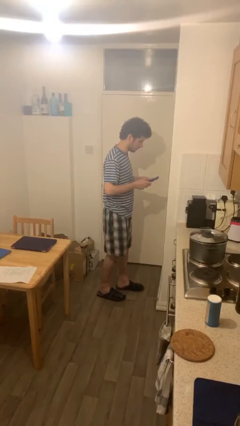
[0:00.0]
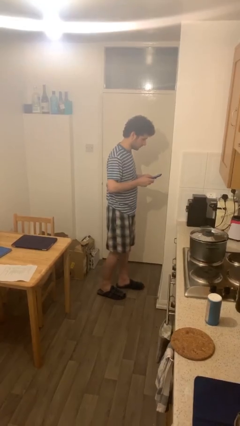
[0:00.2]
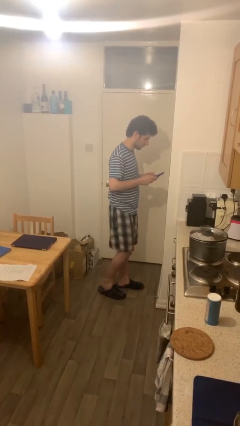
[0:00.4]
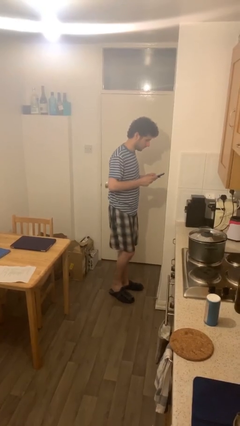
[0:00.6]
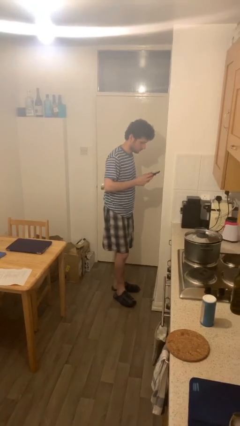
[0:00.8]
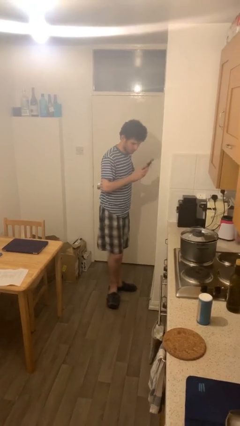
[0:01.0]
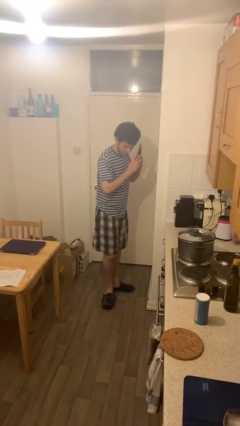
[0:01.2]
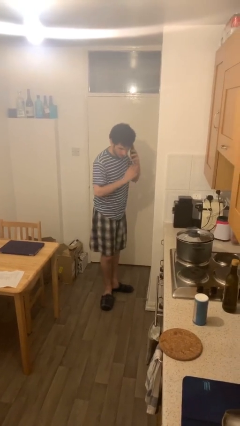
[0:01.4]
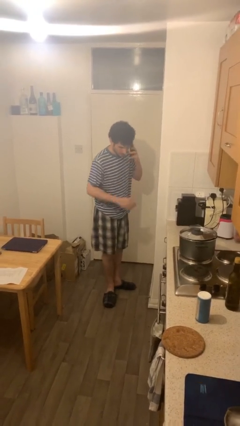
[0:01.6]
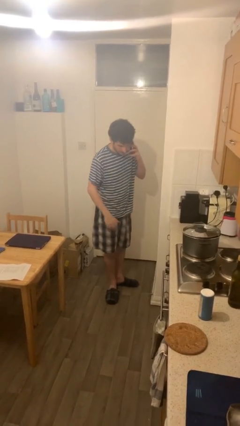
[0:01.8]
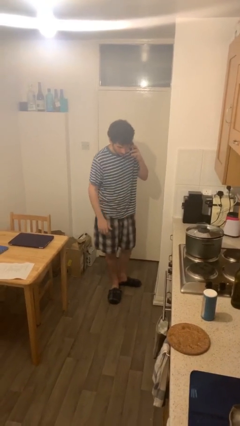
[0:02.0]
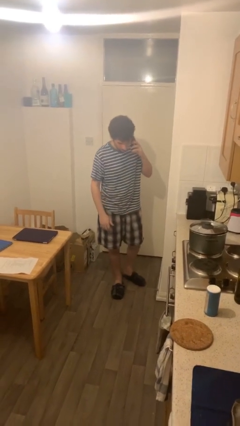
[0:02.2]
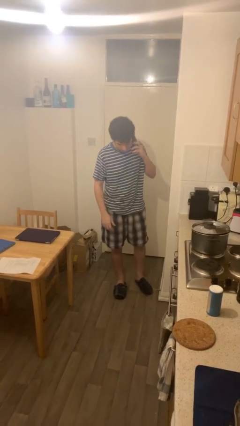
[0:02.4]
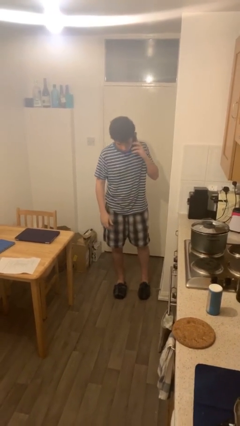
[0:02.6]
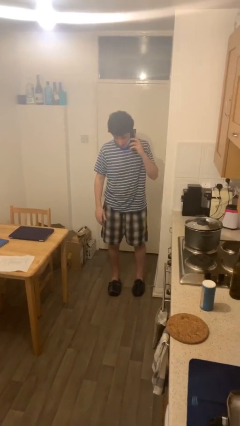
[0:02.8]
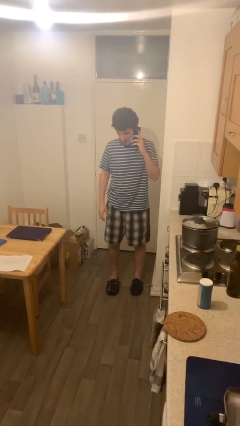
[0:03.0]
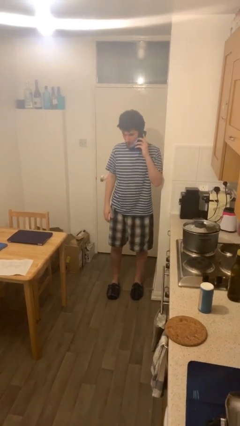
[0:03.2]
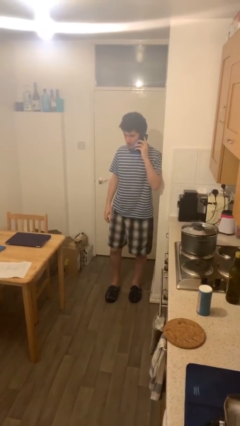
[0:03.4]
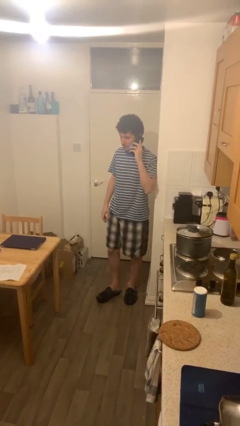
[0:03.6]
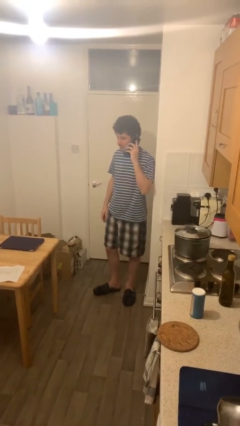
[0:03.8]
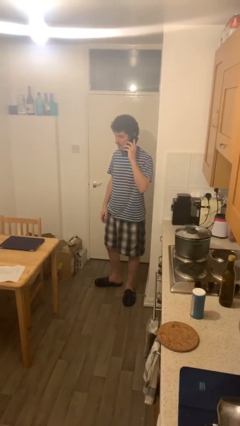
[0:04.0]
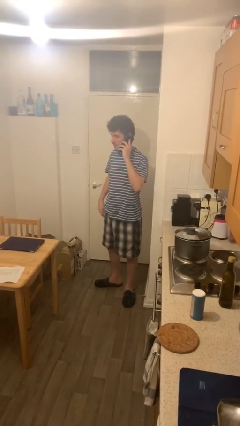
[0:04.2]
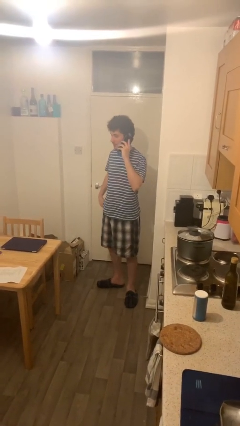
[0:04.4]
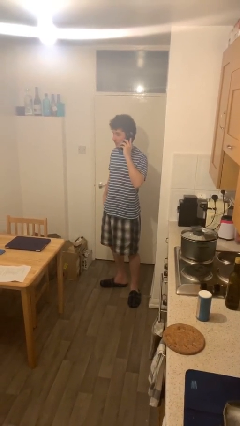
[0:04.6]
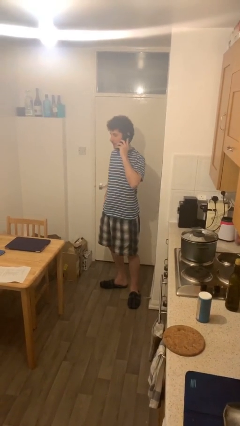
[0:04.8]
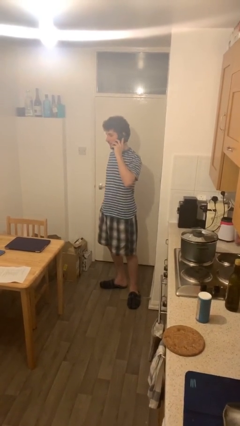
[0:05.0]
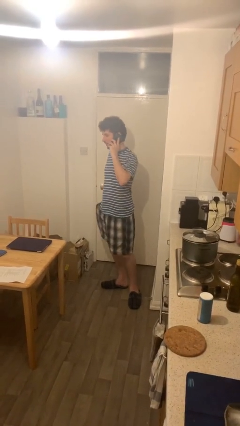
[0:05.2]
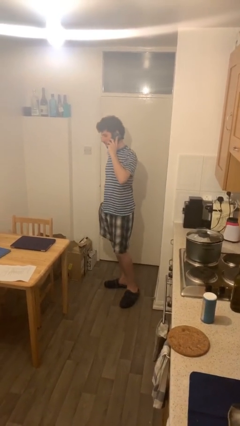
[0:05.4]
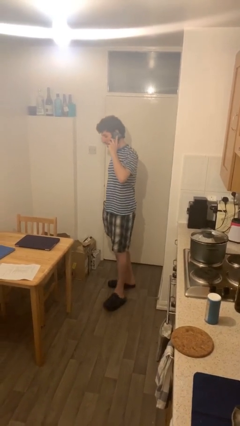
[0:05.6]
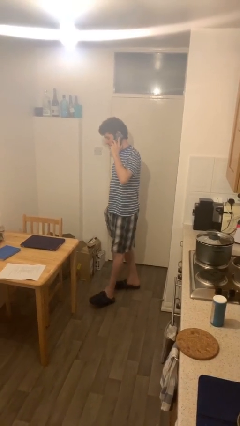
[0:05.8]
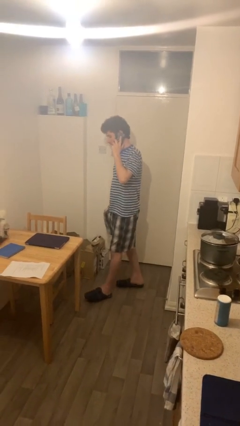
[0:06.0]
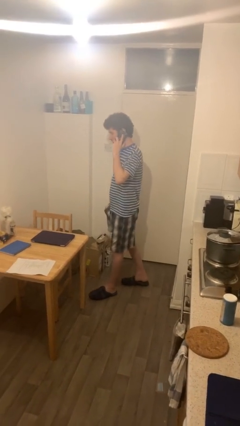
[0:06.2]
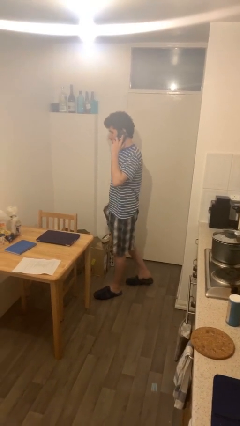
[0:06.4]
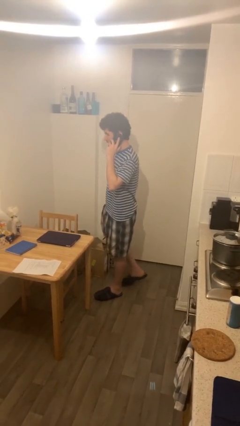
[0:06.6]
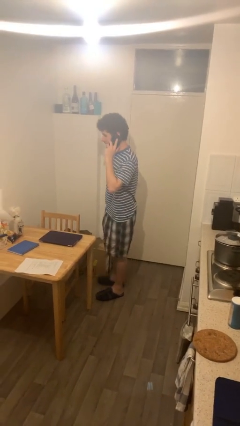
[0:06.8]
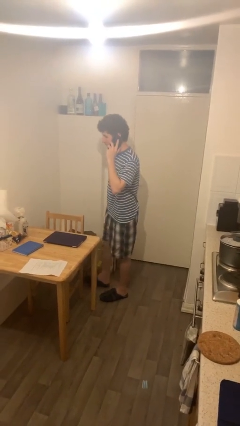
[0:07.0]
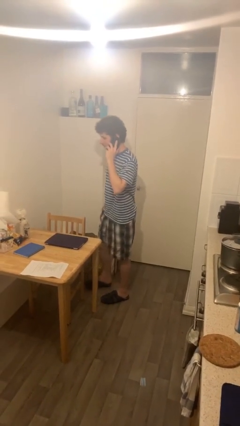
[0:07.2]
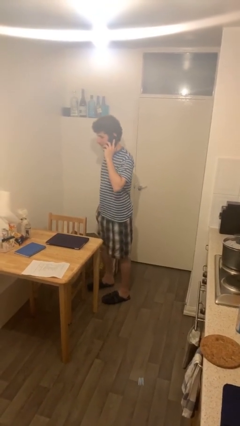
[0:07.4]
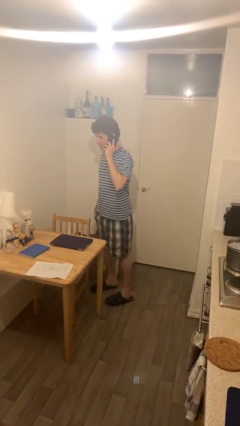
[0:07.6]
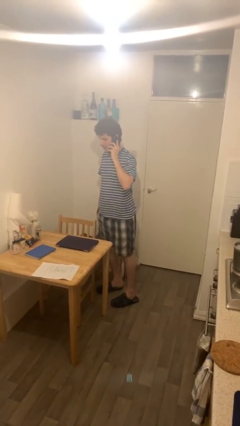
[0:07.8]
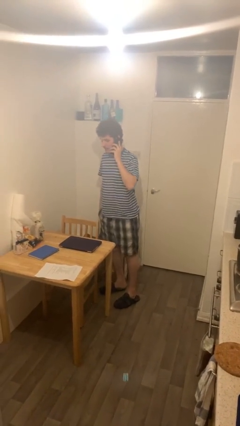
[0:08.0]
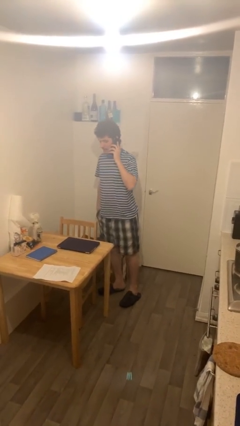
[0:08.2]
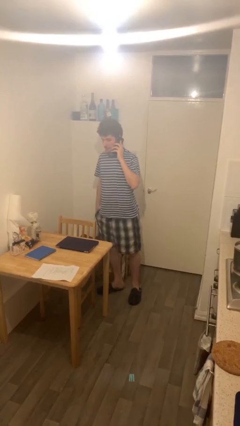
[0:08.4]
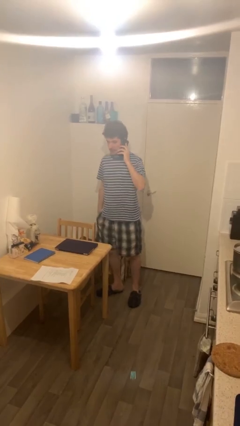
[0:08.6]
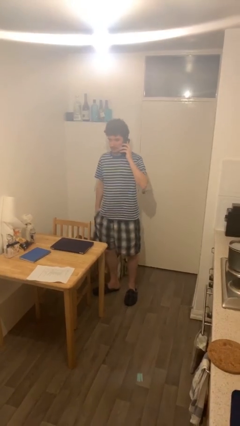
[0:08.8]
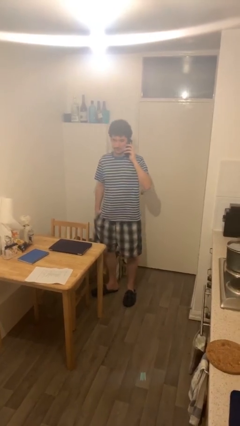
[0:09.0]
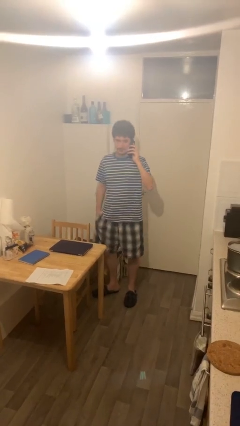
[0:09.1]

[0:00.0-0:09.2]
person talks on phone

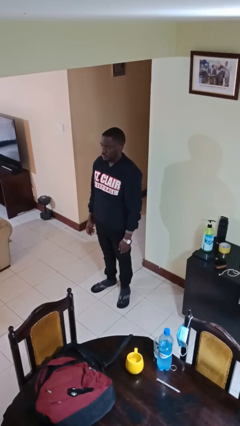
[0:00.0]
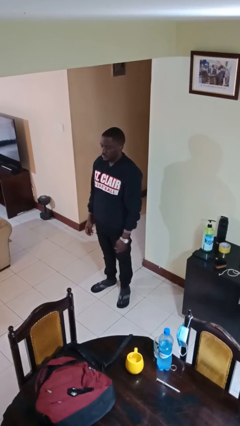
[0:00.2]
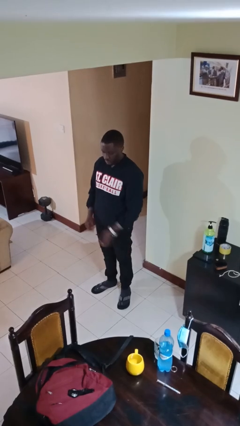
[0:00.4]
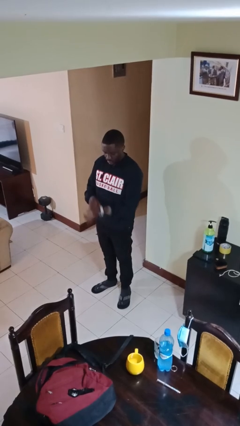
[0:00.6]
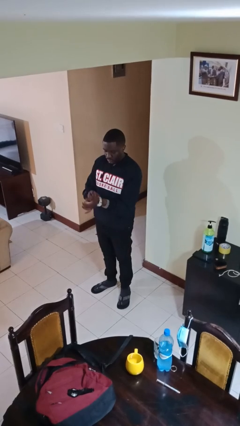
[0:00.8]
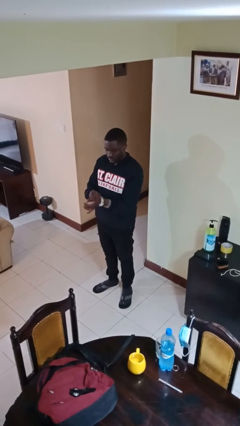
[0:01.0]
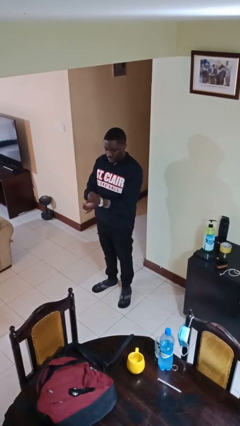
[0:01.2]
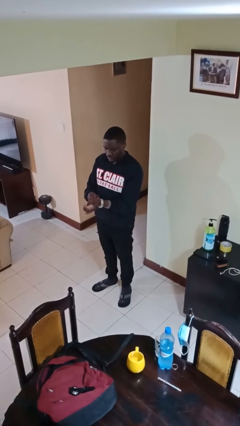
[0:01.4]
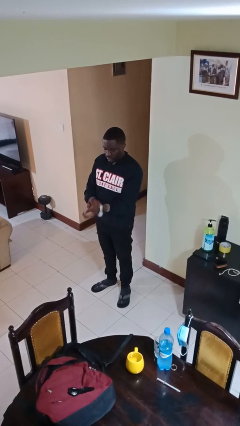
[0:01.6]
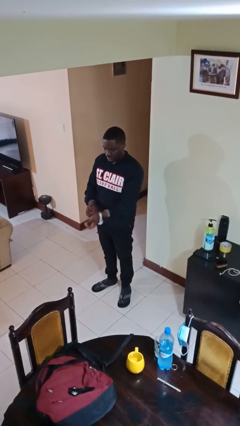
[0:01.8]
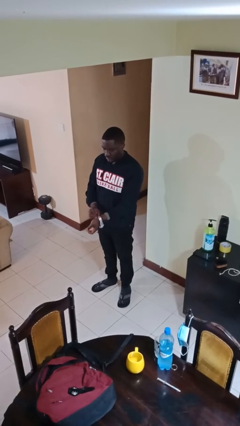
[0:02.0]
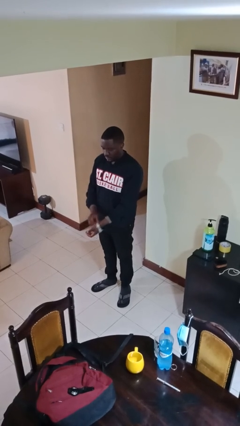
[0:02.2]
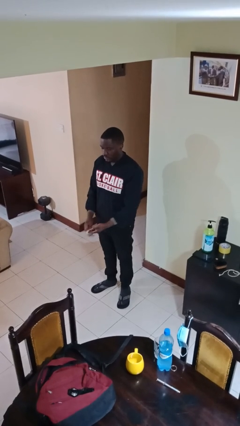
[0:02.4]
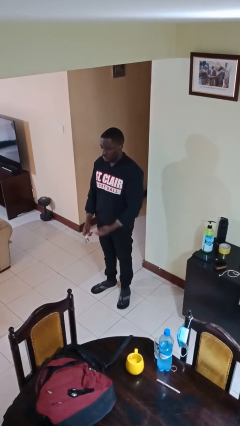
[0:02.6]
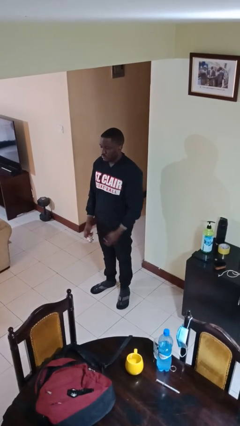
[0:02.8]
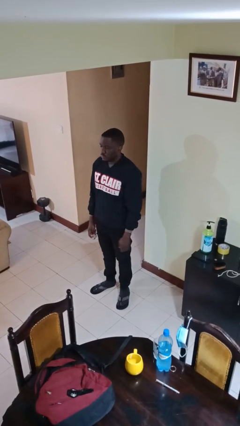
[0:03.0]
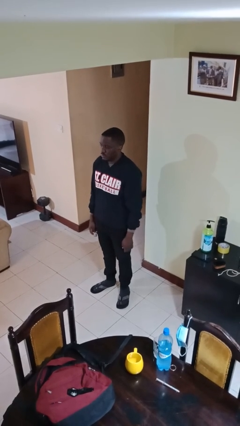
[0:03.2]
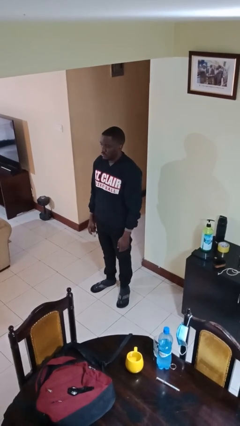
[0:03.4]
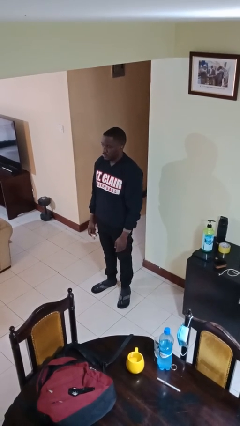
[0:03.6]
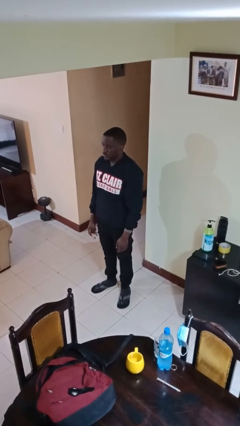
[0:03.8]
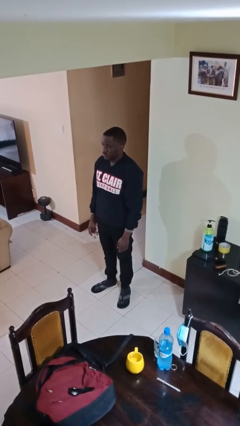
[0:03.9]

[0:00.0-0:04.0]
person takes off wristwatch

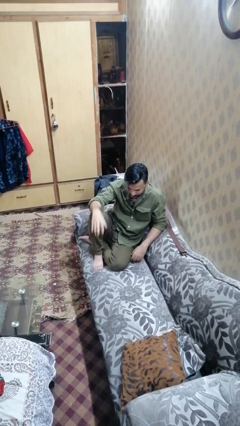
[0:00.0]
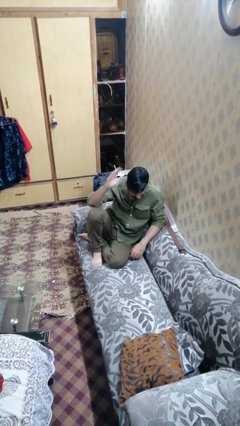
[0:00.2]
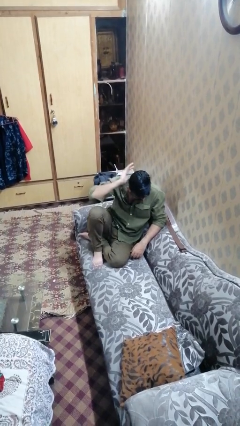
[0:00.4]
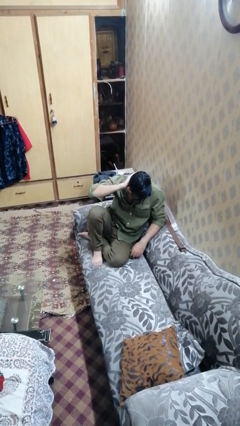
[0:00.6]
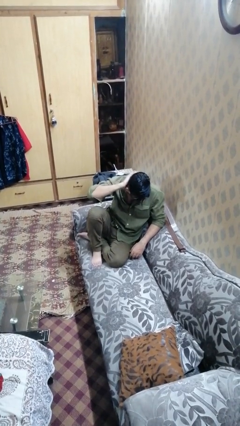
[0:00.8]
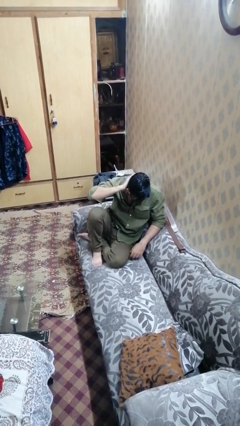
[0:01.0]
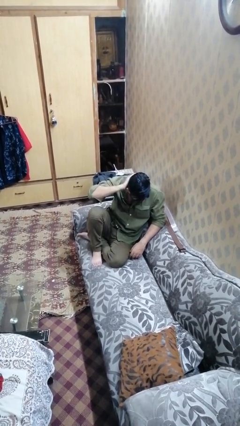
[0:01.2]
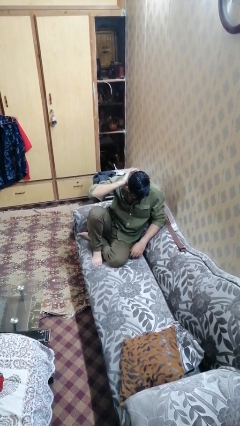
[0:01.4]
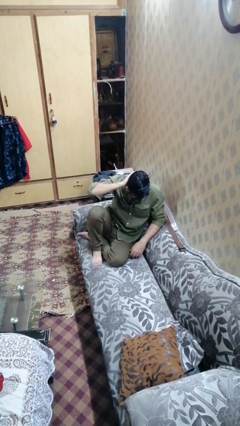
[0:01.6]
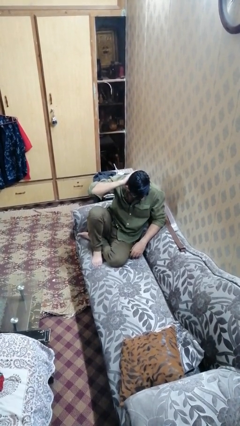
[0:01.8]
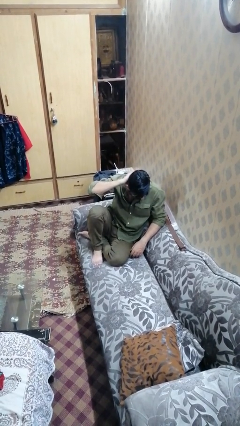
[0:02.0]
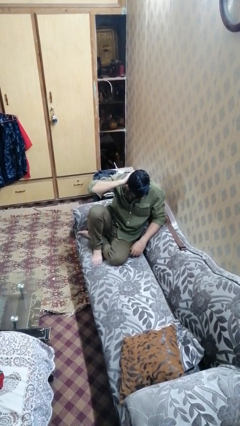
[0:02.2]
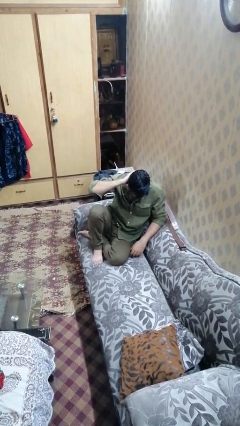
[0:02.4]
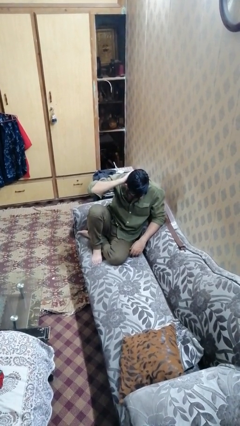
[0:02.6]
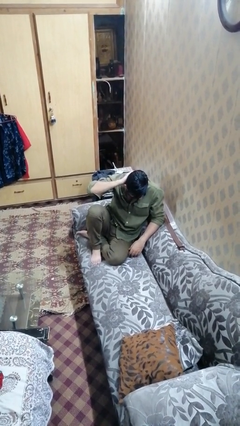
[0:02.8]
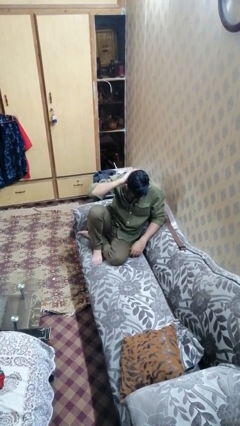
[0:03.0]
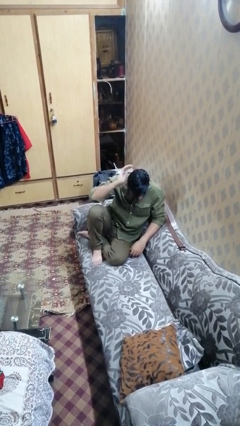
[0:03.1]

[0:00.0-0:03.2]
person pats head

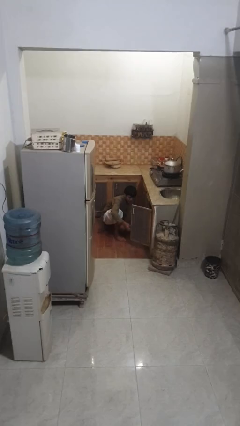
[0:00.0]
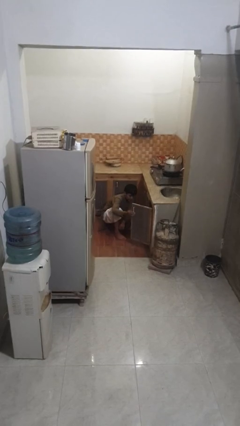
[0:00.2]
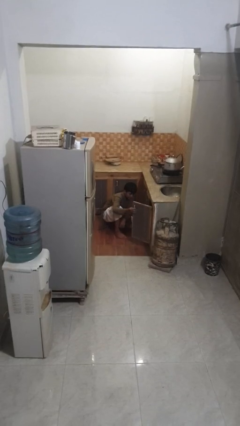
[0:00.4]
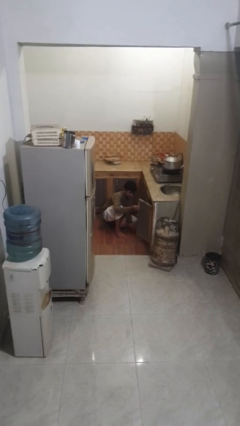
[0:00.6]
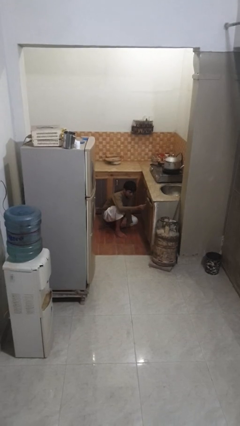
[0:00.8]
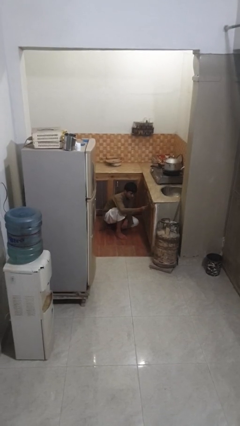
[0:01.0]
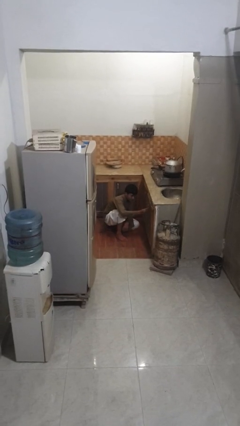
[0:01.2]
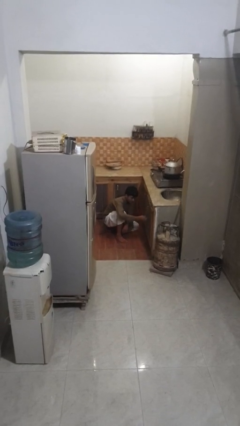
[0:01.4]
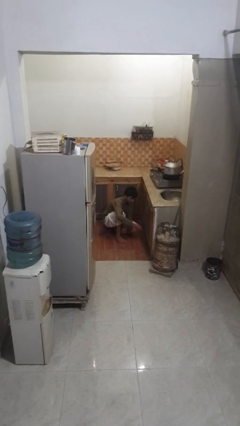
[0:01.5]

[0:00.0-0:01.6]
person closes kitchen drawer
